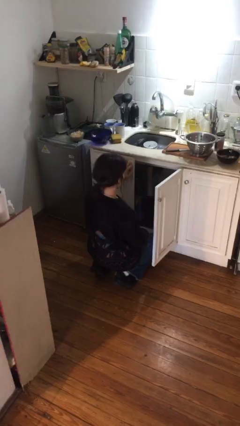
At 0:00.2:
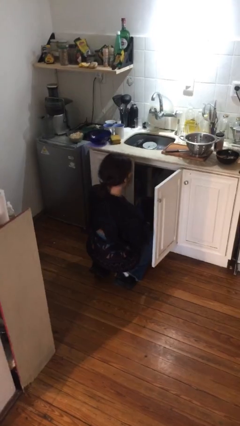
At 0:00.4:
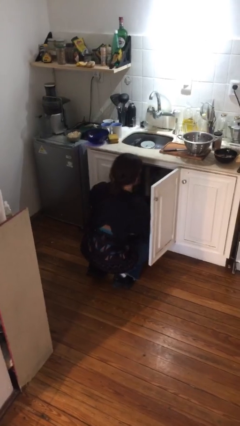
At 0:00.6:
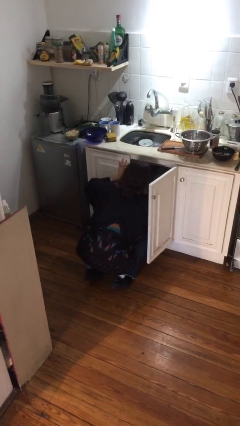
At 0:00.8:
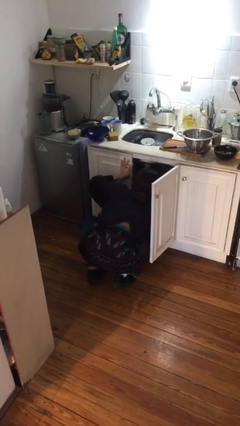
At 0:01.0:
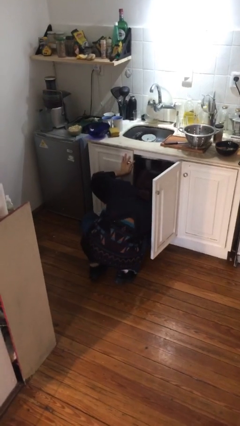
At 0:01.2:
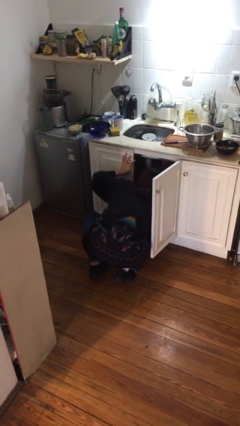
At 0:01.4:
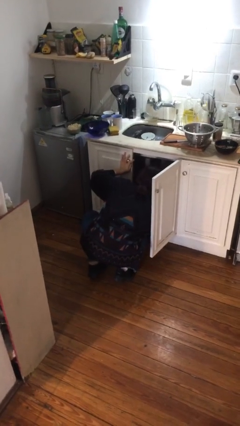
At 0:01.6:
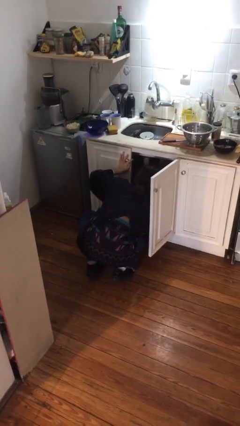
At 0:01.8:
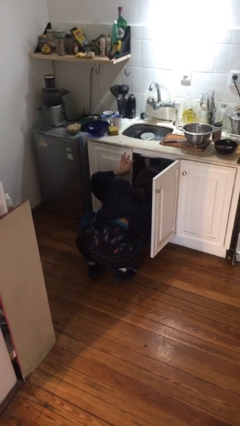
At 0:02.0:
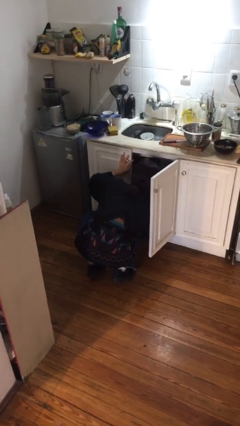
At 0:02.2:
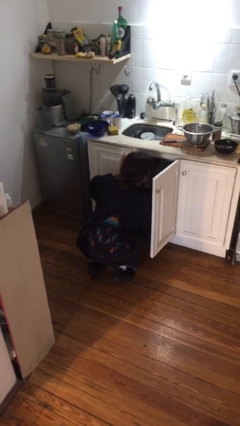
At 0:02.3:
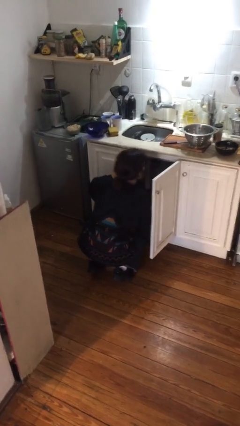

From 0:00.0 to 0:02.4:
person searches in cabinet

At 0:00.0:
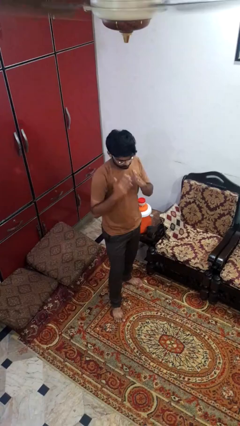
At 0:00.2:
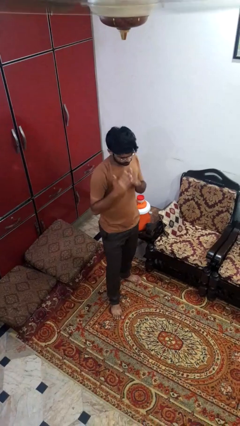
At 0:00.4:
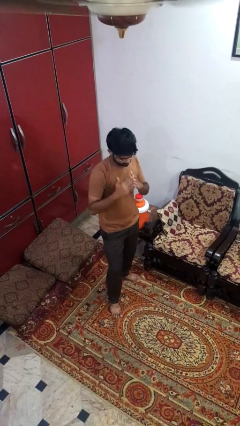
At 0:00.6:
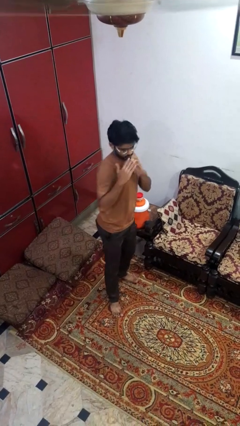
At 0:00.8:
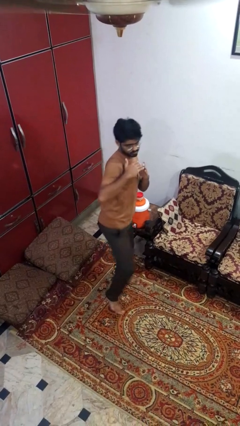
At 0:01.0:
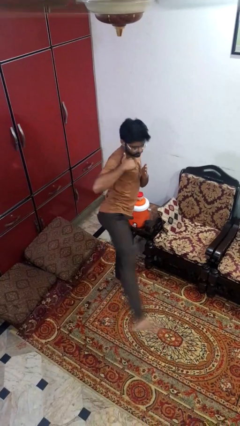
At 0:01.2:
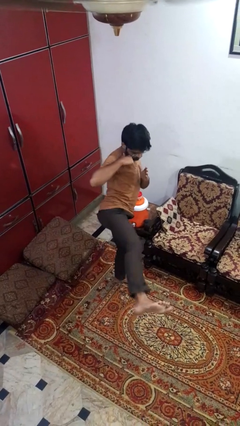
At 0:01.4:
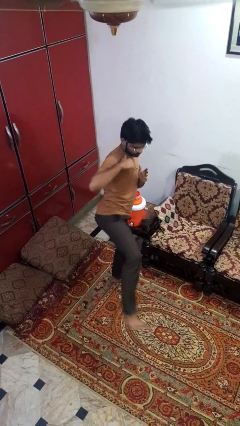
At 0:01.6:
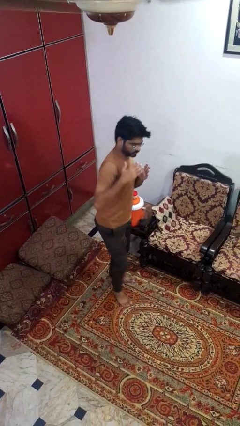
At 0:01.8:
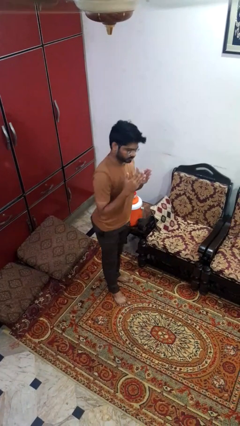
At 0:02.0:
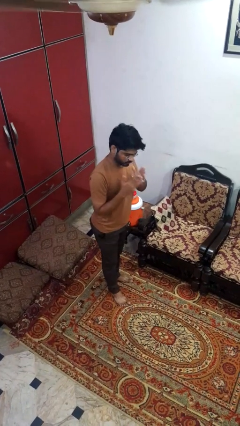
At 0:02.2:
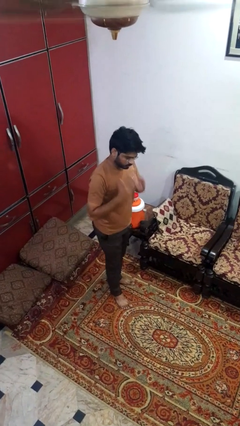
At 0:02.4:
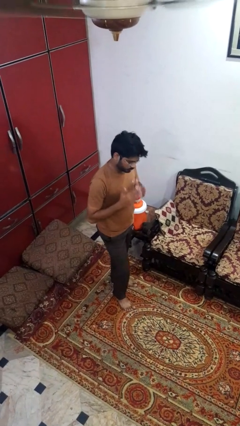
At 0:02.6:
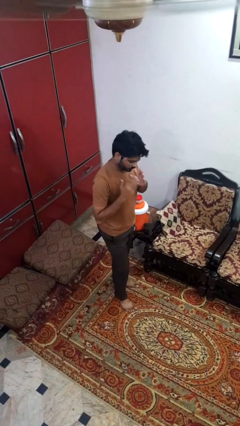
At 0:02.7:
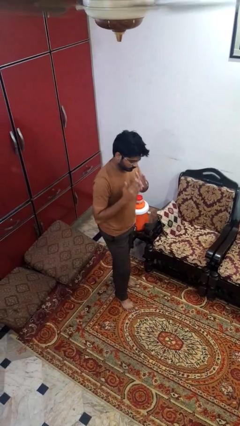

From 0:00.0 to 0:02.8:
person karate kicks

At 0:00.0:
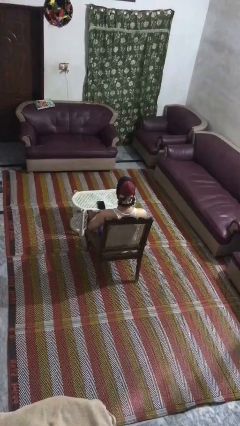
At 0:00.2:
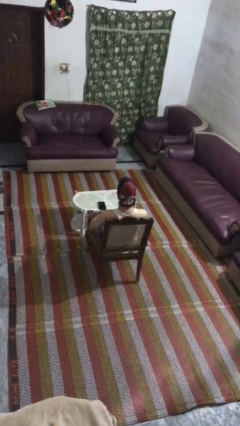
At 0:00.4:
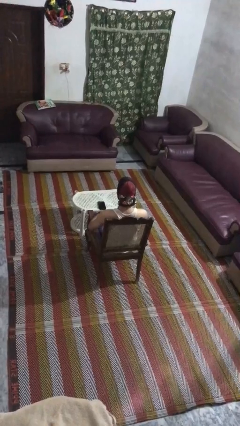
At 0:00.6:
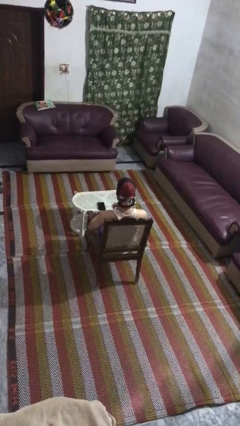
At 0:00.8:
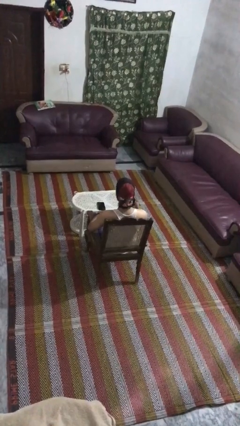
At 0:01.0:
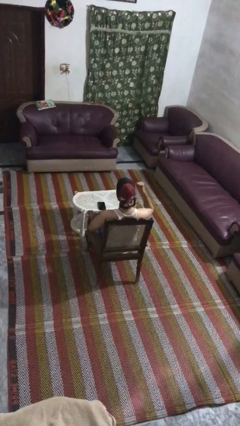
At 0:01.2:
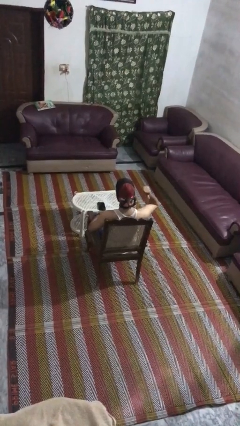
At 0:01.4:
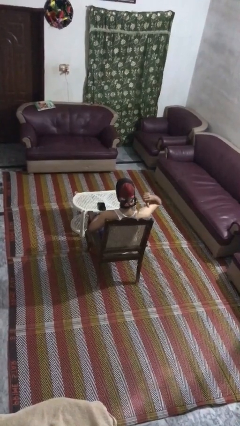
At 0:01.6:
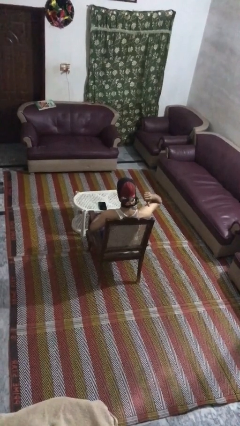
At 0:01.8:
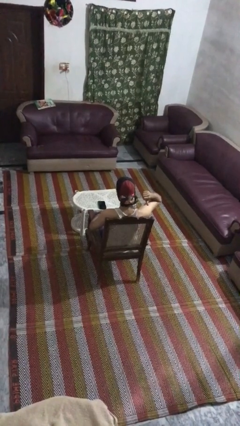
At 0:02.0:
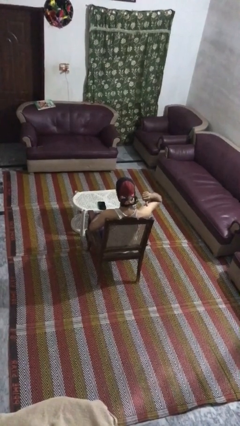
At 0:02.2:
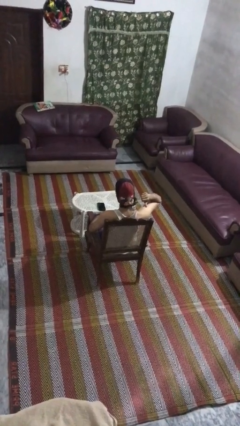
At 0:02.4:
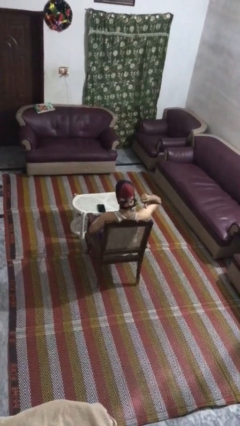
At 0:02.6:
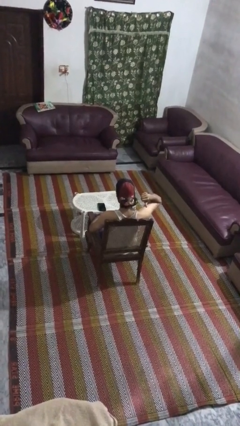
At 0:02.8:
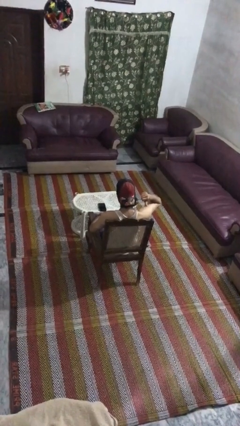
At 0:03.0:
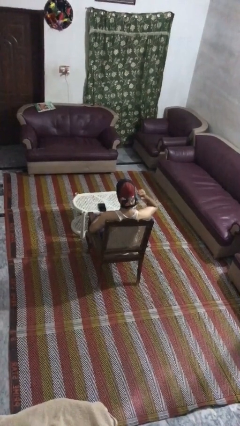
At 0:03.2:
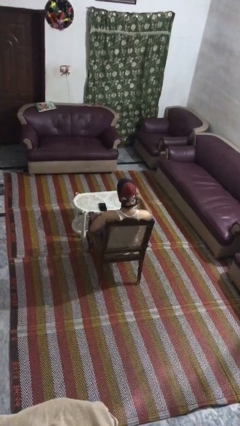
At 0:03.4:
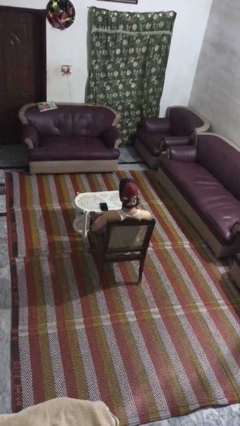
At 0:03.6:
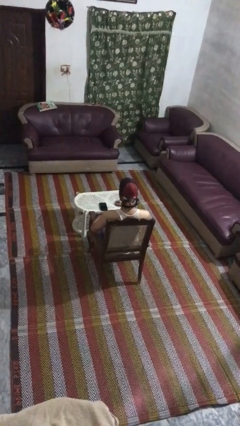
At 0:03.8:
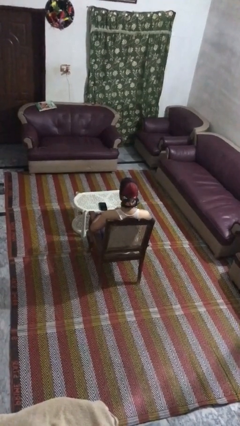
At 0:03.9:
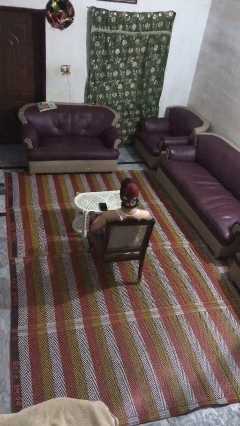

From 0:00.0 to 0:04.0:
person gestures behind me

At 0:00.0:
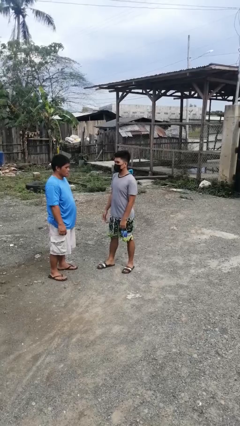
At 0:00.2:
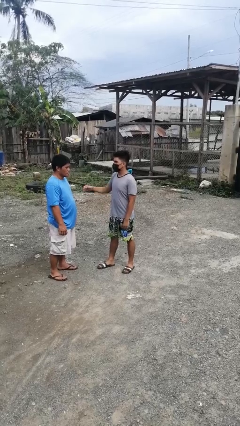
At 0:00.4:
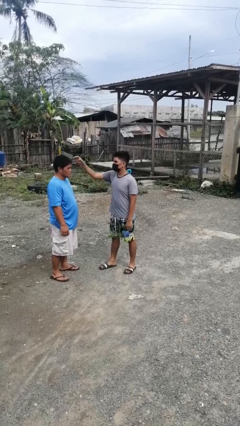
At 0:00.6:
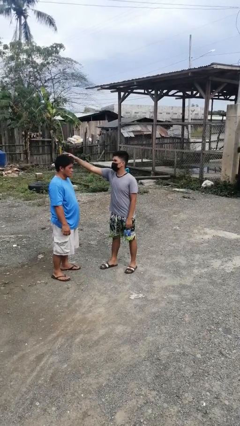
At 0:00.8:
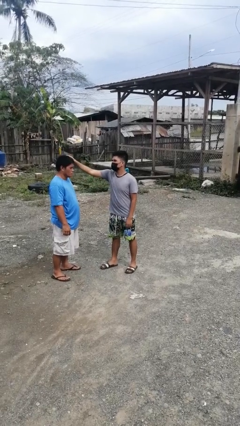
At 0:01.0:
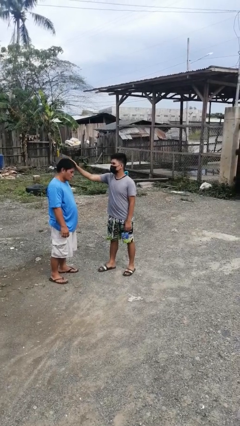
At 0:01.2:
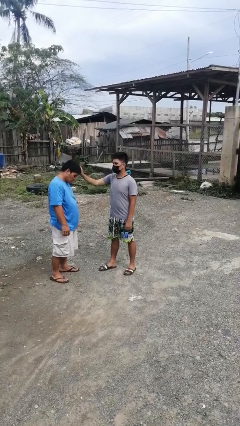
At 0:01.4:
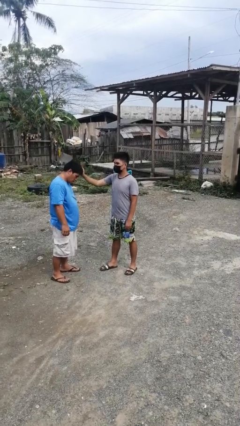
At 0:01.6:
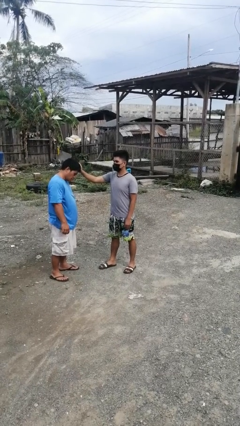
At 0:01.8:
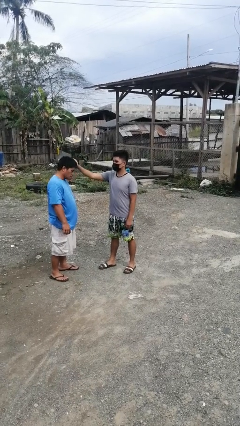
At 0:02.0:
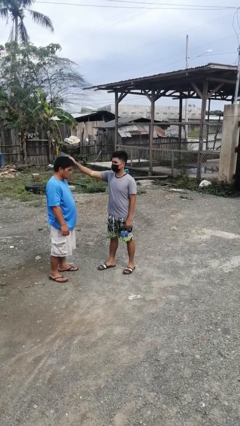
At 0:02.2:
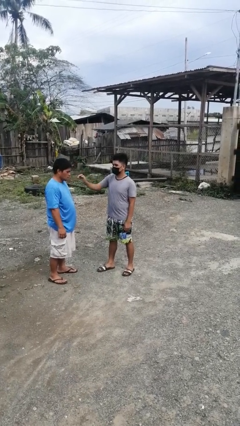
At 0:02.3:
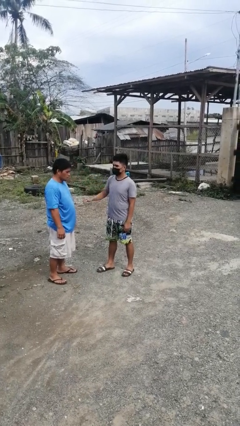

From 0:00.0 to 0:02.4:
person grabs person by hair

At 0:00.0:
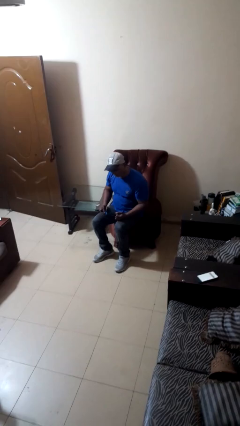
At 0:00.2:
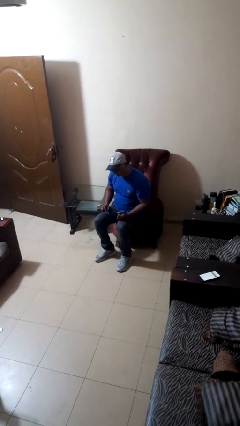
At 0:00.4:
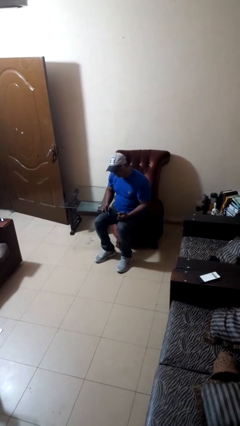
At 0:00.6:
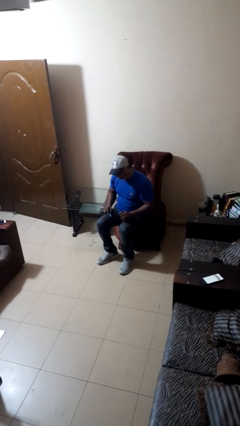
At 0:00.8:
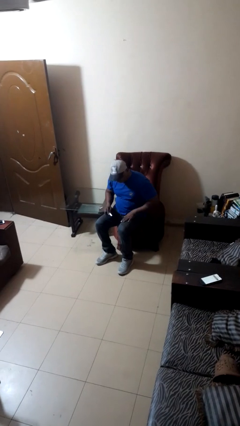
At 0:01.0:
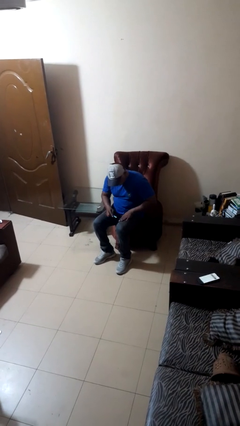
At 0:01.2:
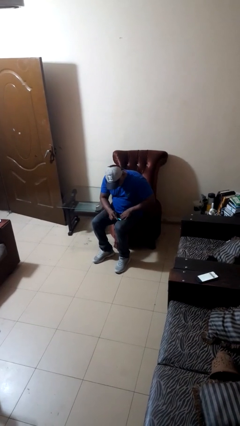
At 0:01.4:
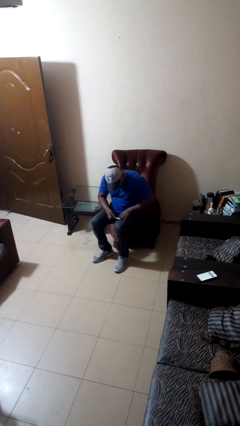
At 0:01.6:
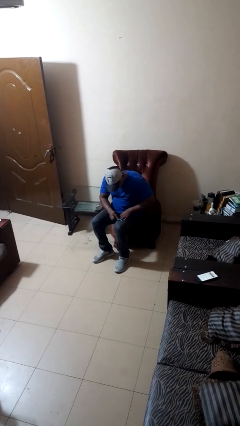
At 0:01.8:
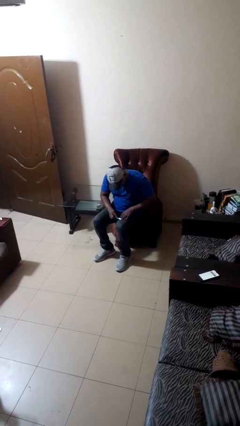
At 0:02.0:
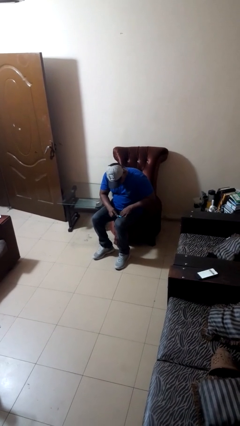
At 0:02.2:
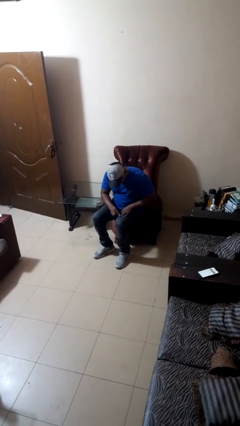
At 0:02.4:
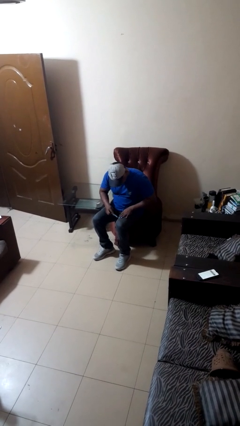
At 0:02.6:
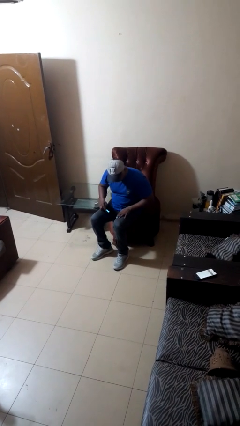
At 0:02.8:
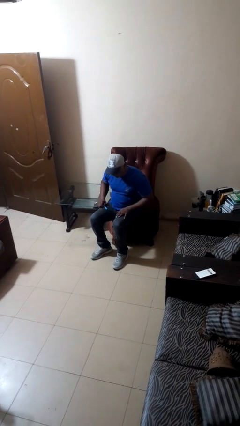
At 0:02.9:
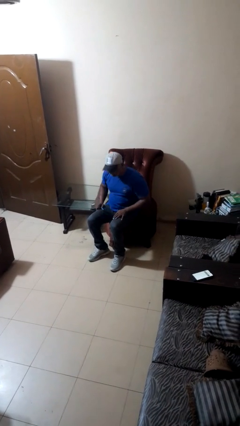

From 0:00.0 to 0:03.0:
person files fingernails

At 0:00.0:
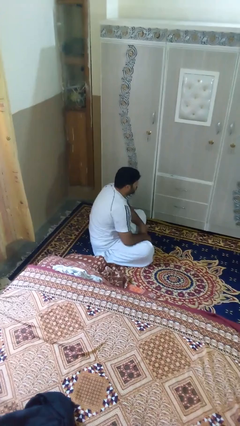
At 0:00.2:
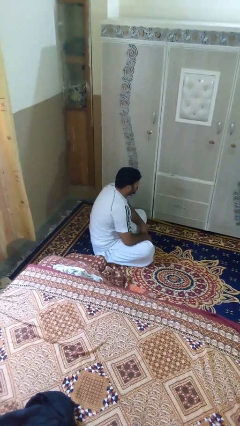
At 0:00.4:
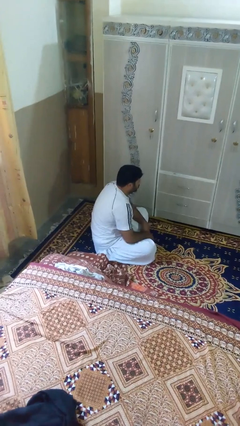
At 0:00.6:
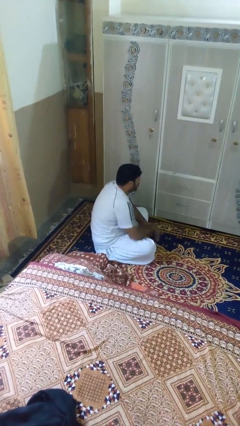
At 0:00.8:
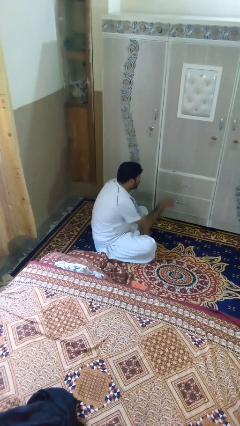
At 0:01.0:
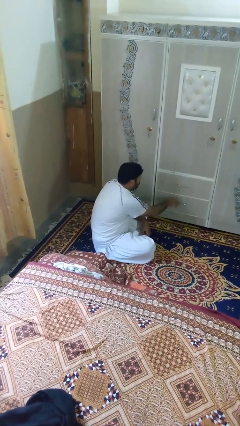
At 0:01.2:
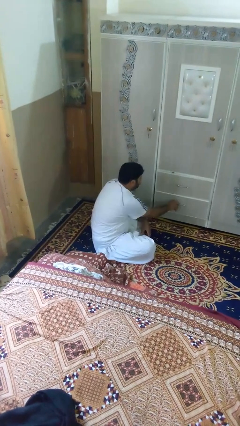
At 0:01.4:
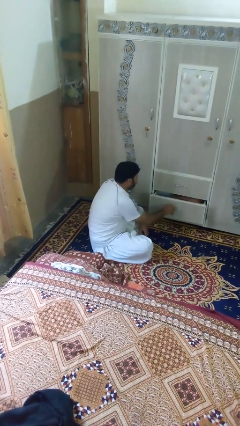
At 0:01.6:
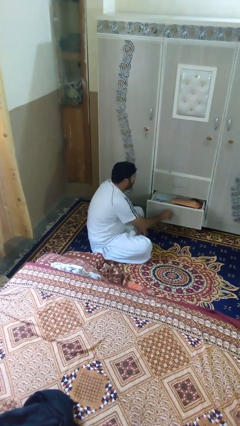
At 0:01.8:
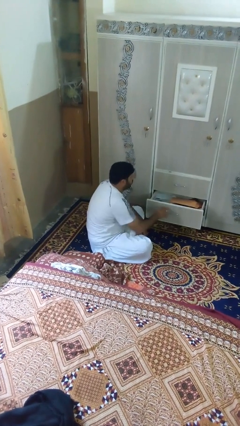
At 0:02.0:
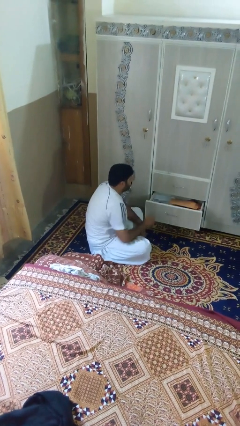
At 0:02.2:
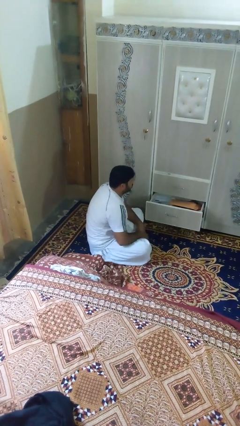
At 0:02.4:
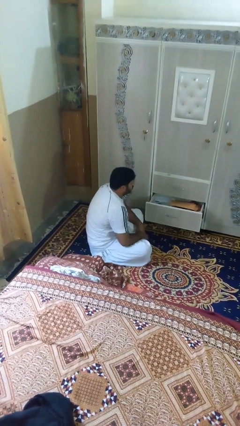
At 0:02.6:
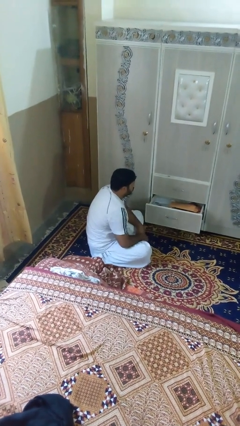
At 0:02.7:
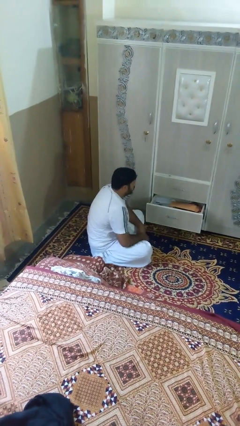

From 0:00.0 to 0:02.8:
person opens dresser drawer
